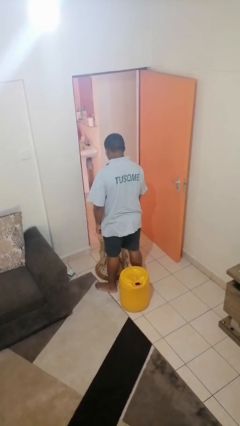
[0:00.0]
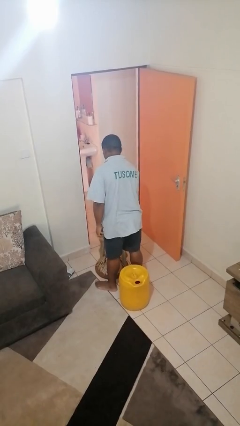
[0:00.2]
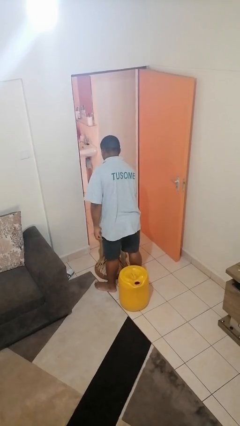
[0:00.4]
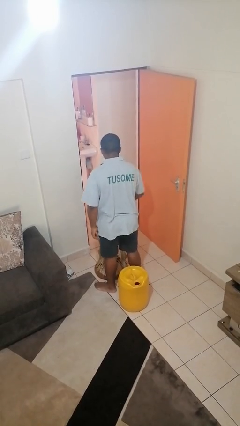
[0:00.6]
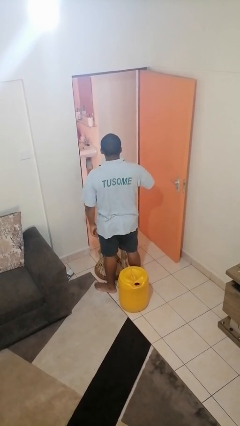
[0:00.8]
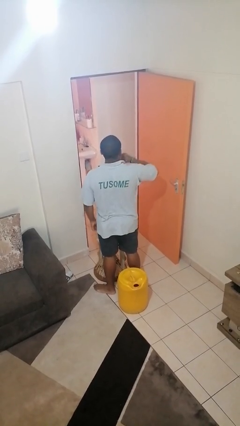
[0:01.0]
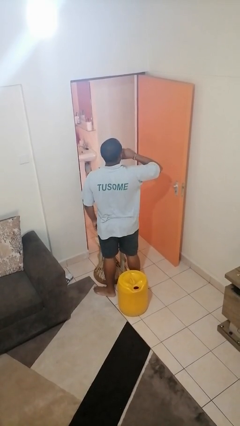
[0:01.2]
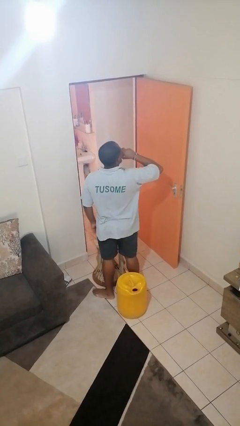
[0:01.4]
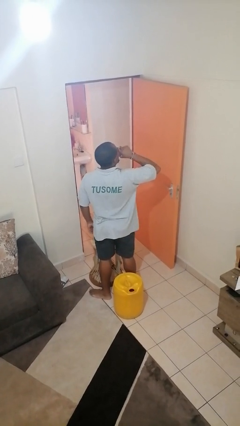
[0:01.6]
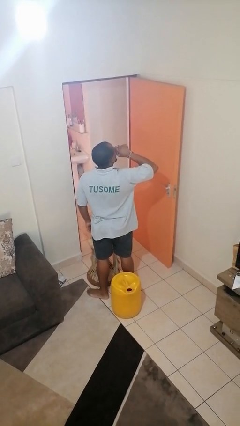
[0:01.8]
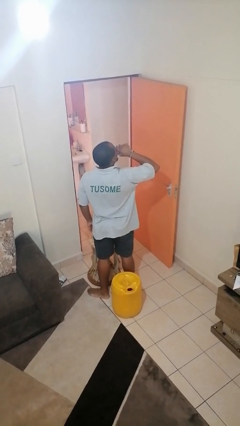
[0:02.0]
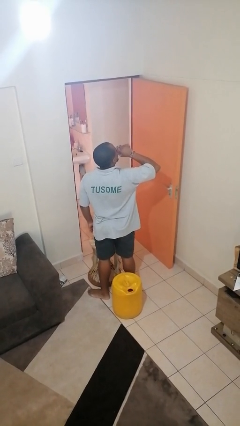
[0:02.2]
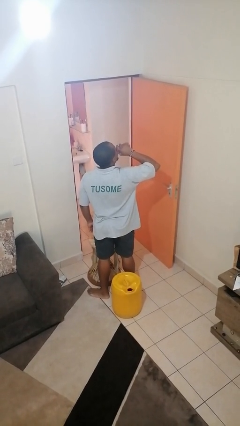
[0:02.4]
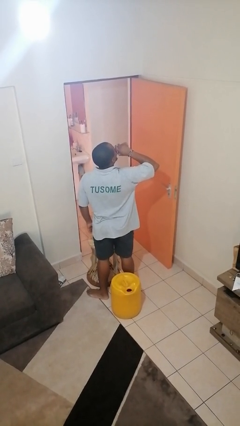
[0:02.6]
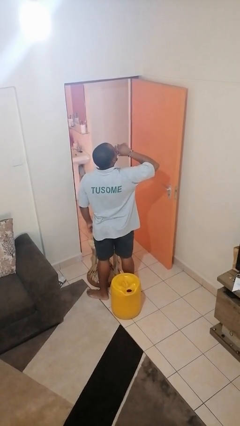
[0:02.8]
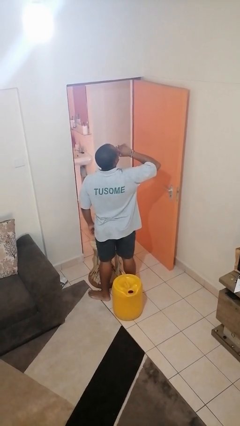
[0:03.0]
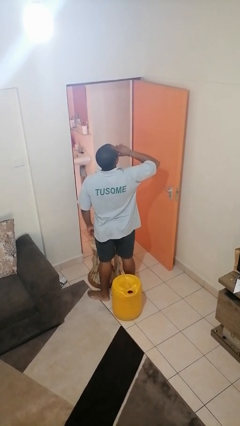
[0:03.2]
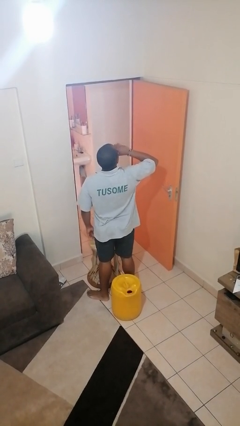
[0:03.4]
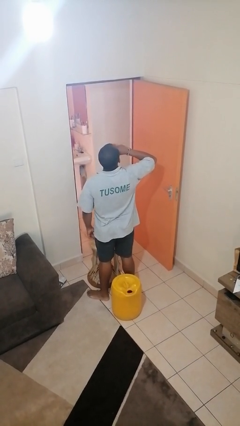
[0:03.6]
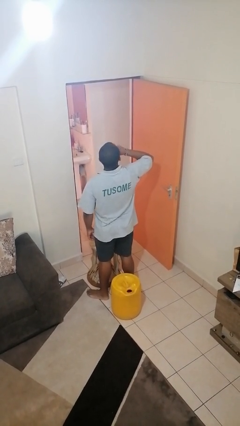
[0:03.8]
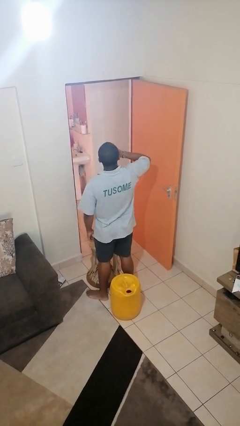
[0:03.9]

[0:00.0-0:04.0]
person drinks from bottle

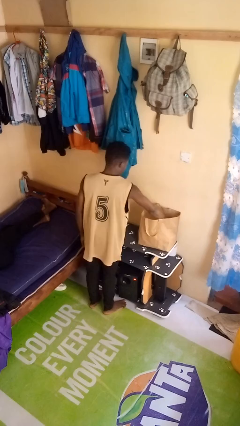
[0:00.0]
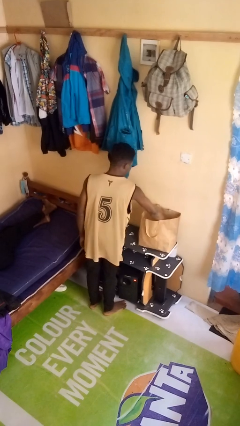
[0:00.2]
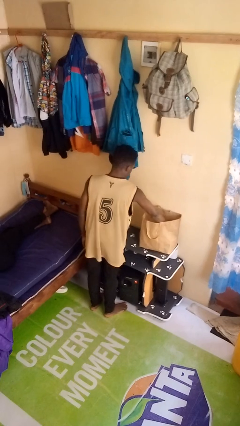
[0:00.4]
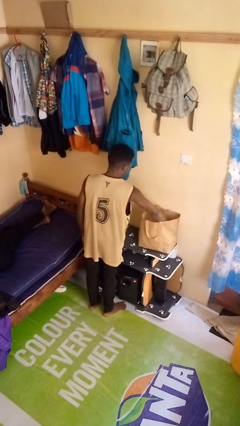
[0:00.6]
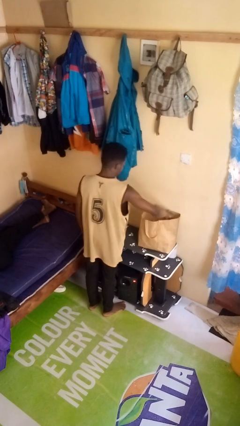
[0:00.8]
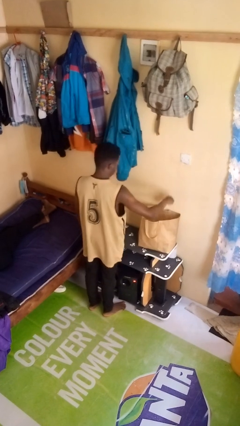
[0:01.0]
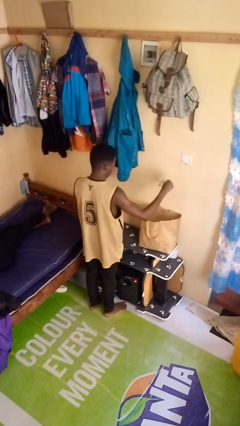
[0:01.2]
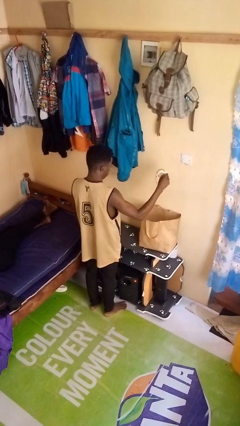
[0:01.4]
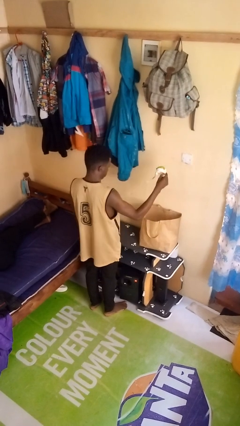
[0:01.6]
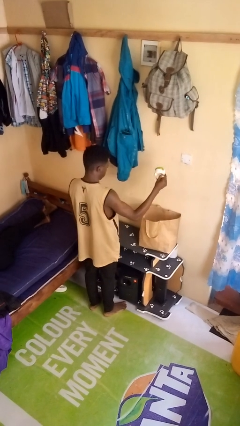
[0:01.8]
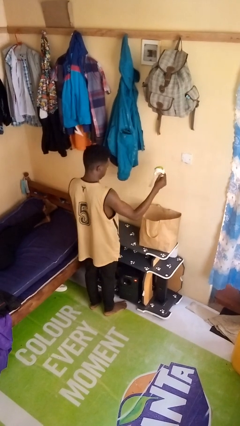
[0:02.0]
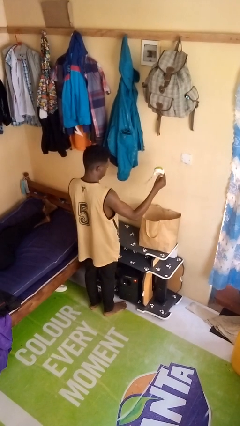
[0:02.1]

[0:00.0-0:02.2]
person takes object from bag

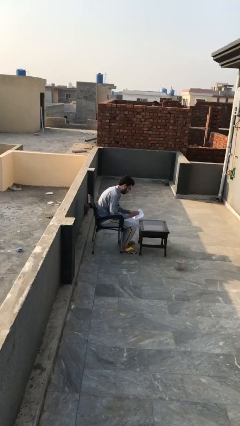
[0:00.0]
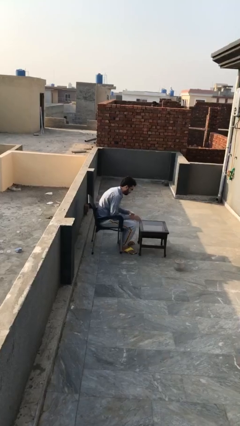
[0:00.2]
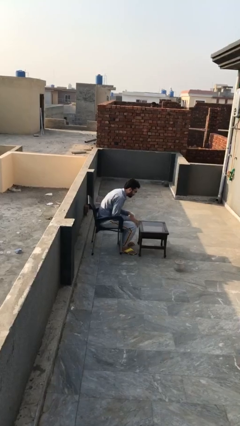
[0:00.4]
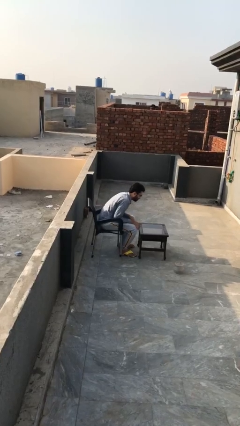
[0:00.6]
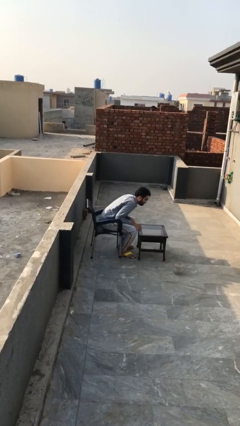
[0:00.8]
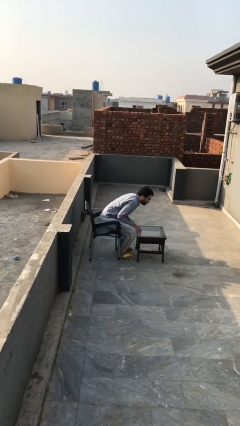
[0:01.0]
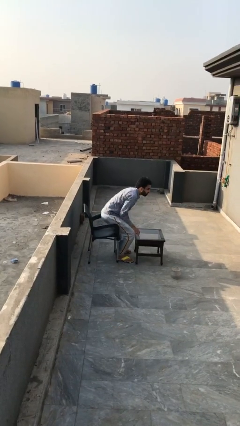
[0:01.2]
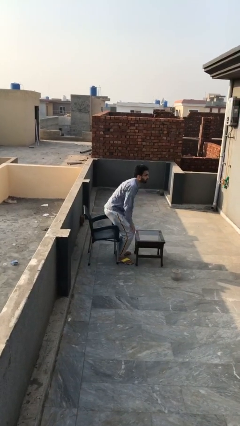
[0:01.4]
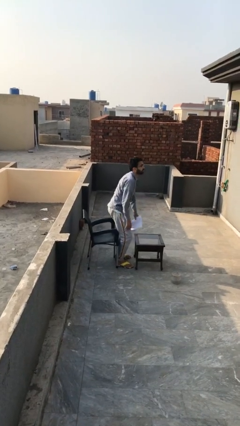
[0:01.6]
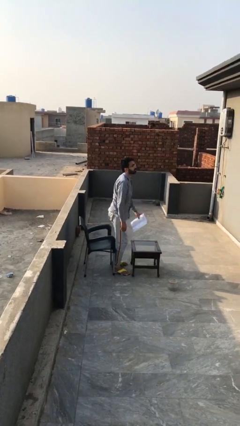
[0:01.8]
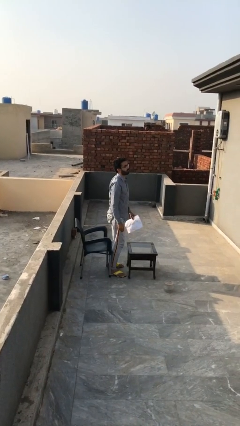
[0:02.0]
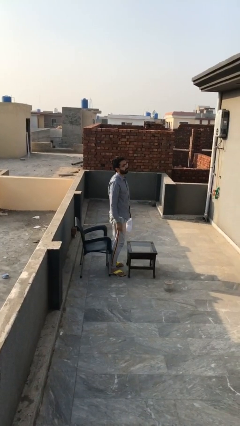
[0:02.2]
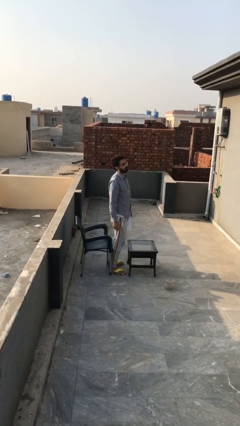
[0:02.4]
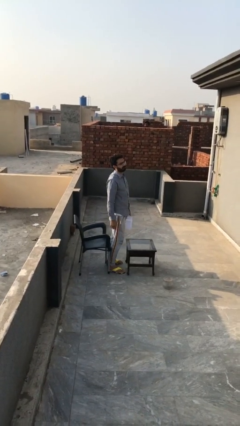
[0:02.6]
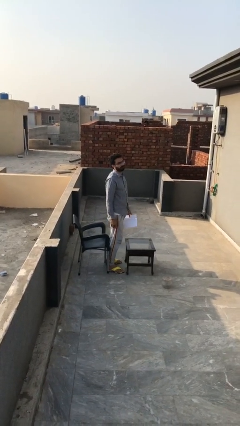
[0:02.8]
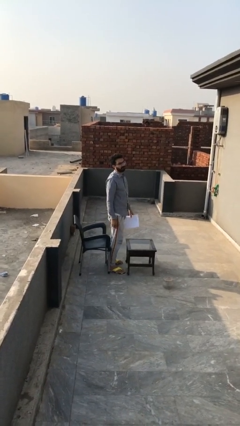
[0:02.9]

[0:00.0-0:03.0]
person stands up

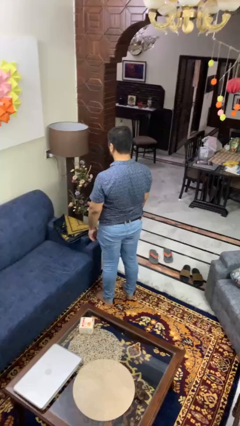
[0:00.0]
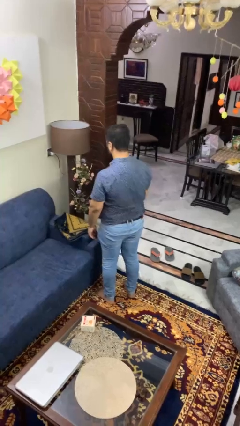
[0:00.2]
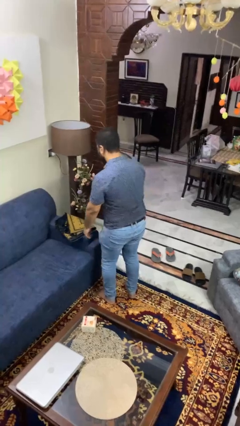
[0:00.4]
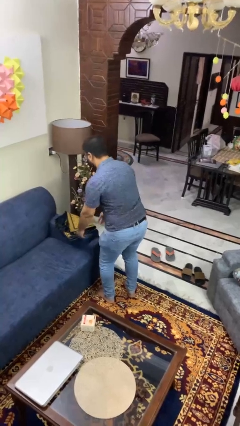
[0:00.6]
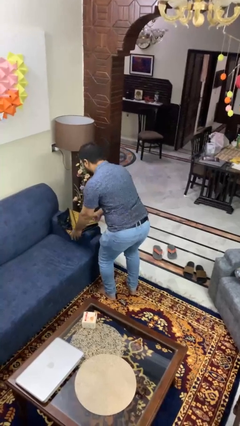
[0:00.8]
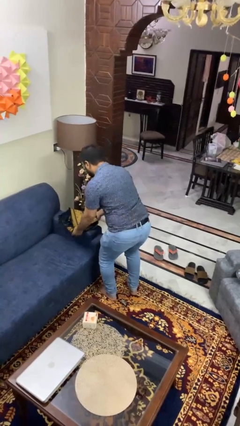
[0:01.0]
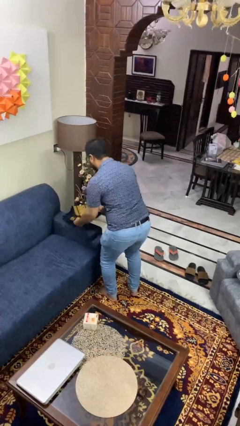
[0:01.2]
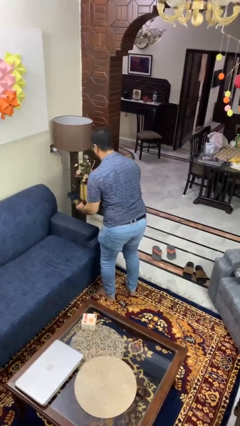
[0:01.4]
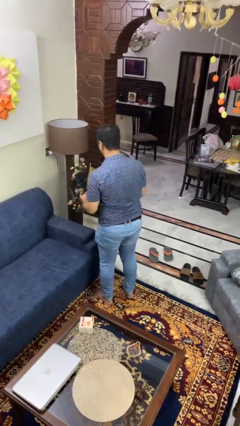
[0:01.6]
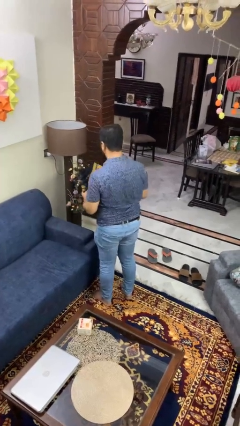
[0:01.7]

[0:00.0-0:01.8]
person picks up object from couch

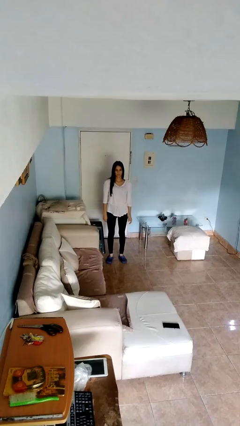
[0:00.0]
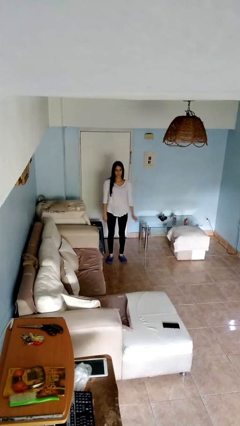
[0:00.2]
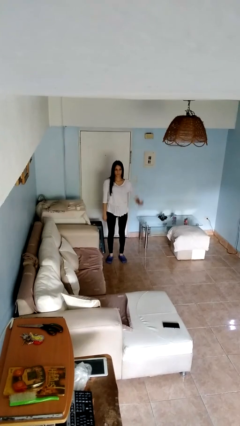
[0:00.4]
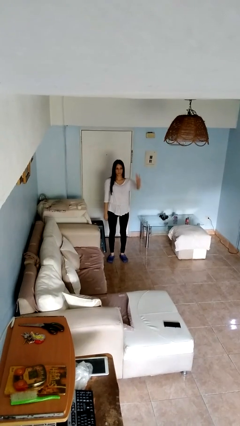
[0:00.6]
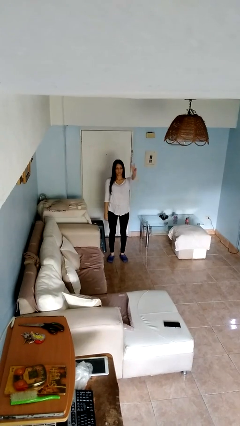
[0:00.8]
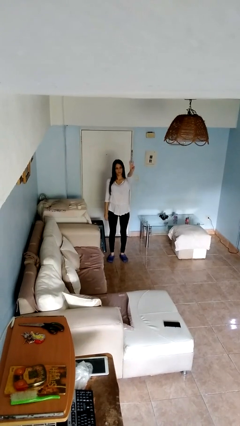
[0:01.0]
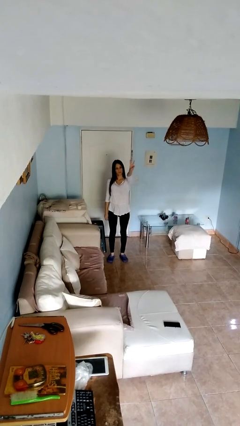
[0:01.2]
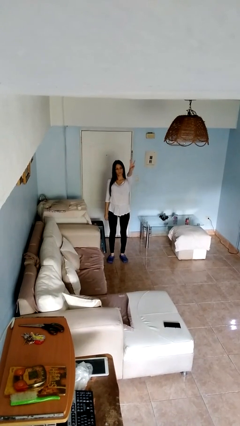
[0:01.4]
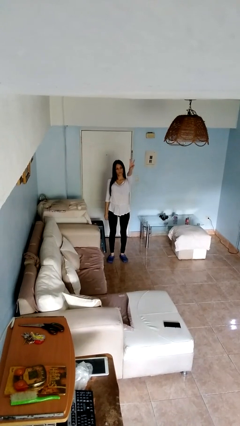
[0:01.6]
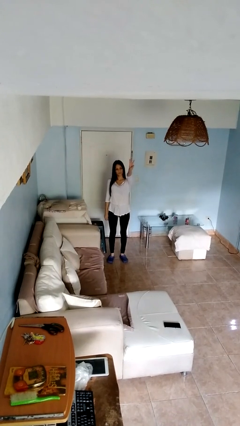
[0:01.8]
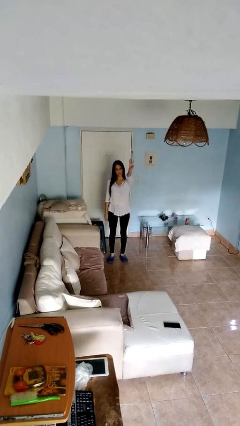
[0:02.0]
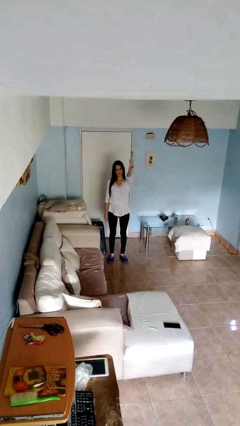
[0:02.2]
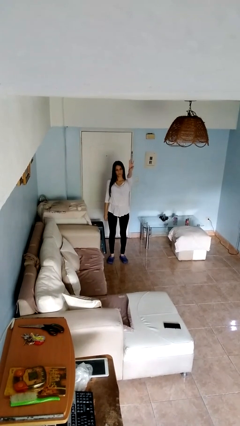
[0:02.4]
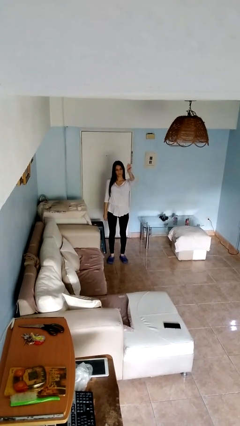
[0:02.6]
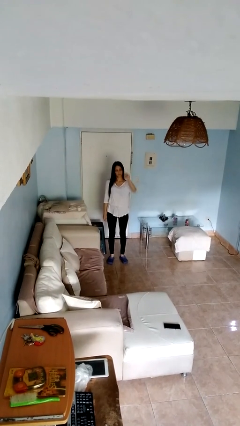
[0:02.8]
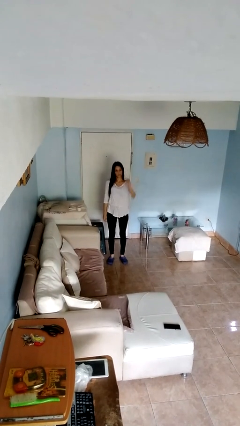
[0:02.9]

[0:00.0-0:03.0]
person gestures number three

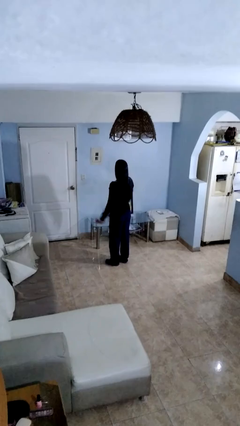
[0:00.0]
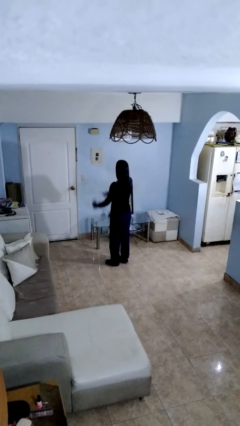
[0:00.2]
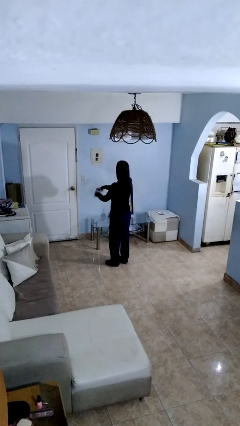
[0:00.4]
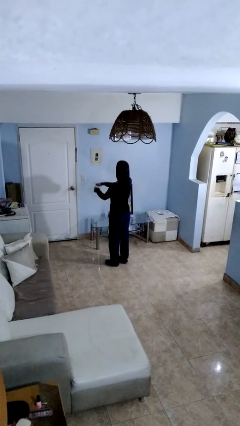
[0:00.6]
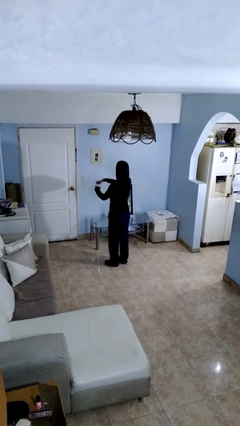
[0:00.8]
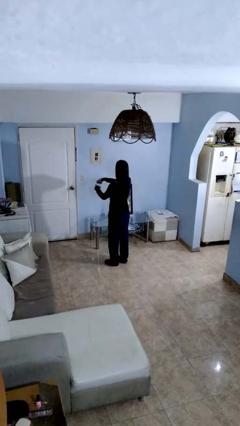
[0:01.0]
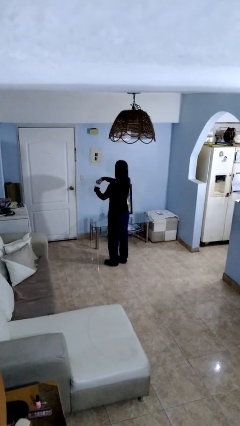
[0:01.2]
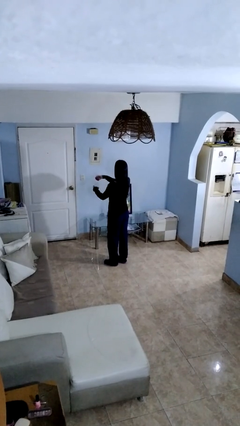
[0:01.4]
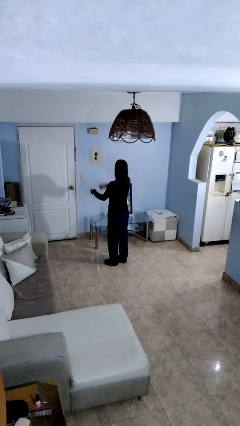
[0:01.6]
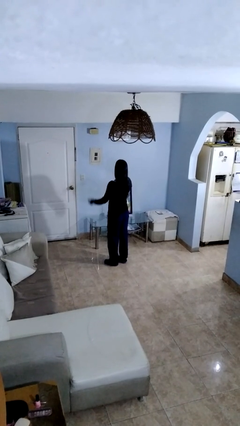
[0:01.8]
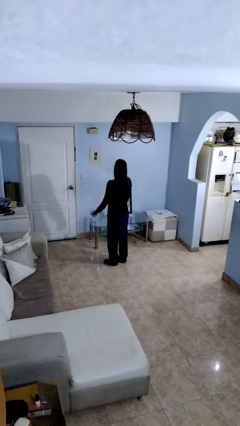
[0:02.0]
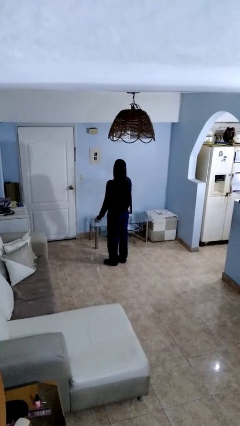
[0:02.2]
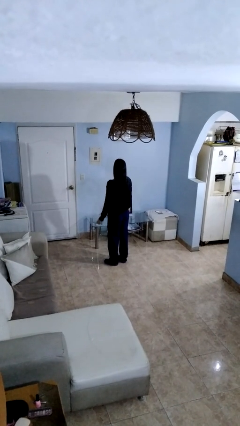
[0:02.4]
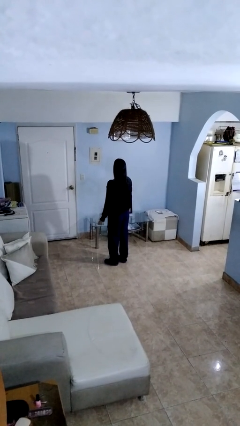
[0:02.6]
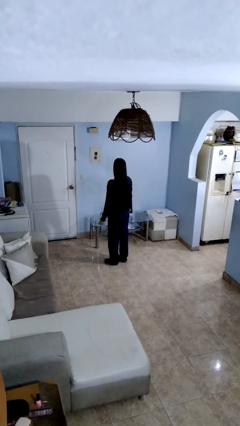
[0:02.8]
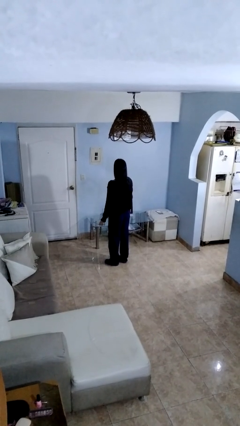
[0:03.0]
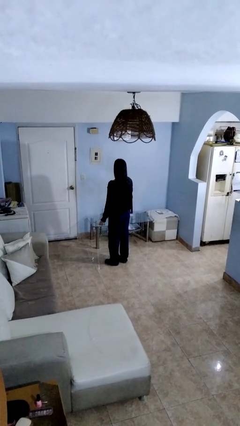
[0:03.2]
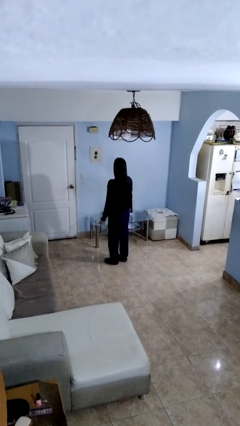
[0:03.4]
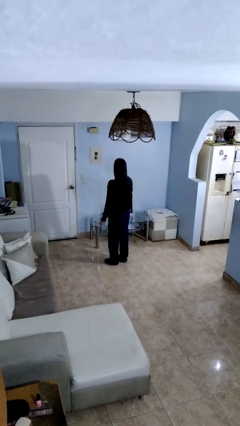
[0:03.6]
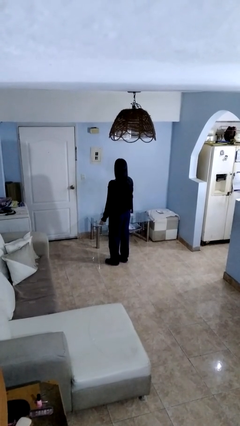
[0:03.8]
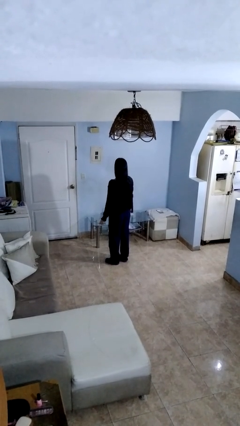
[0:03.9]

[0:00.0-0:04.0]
person opens jar
